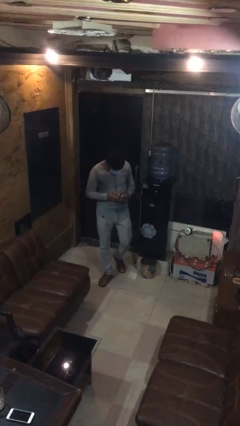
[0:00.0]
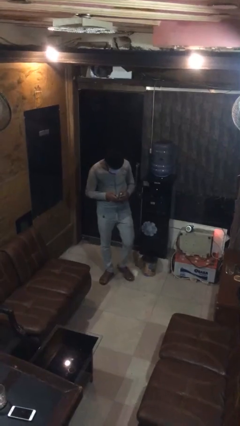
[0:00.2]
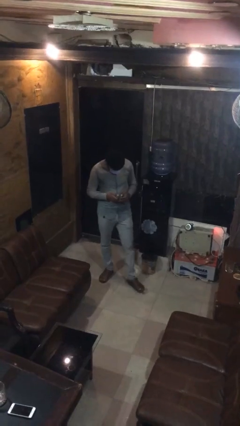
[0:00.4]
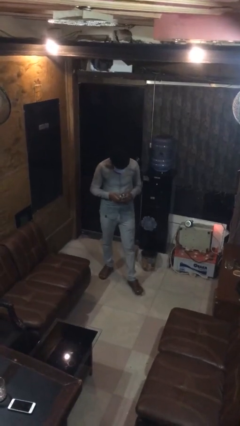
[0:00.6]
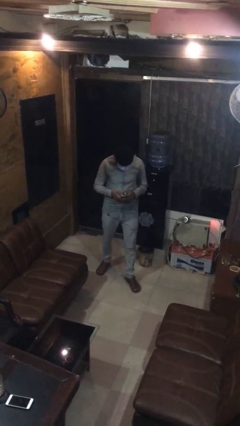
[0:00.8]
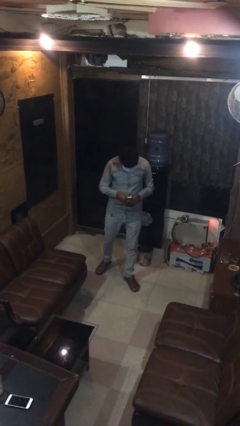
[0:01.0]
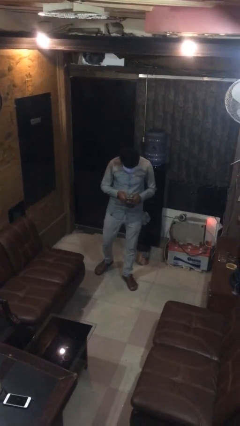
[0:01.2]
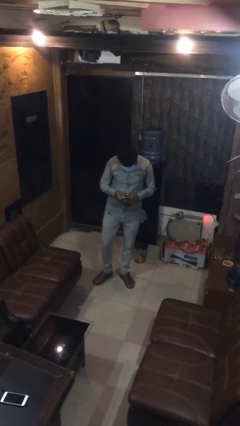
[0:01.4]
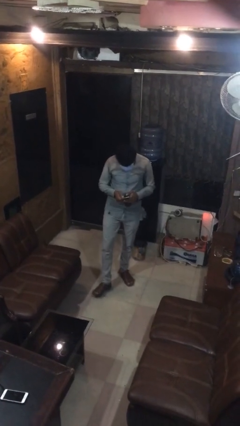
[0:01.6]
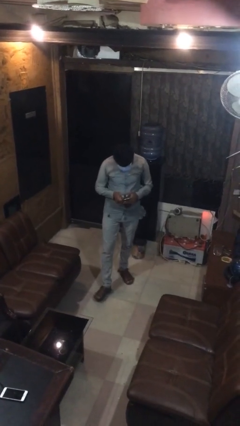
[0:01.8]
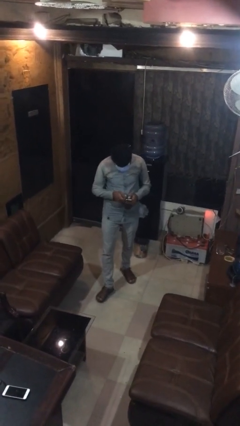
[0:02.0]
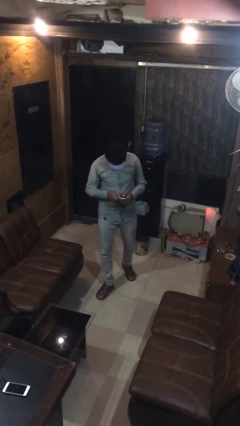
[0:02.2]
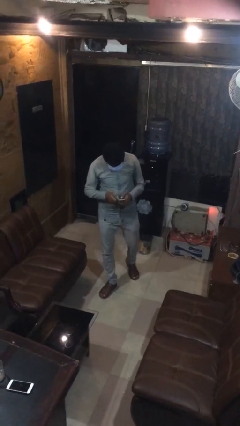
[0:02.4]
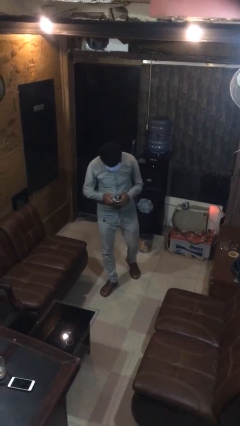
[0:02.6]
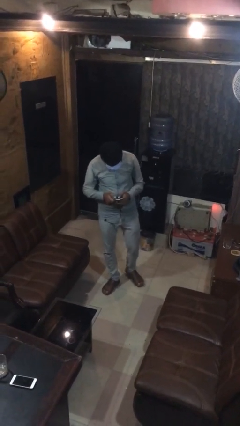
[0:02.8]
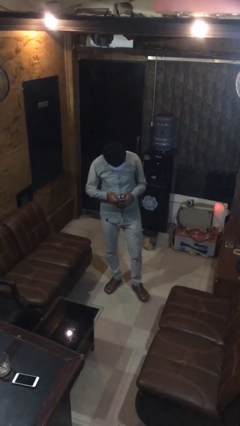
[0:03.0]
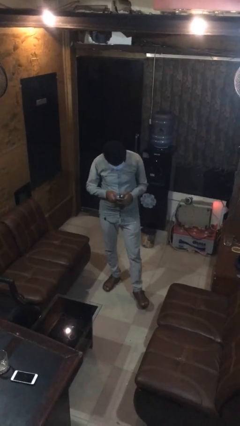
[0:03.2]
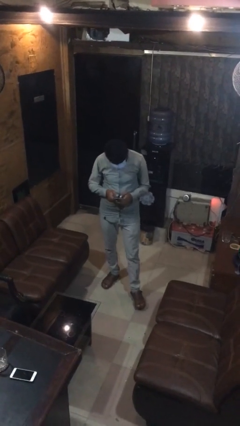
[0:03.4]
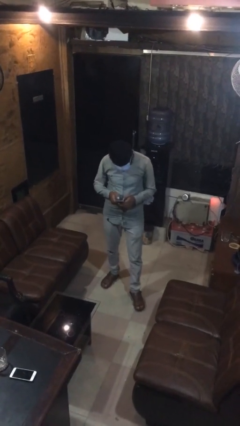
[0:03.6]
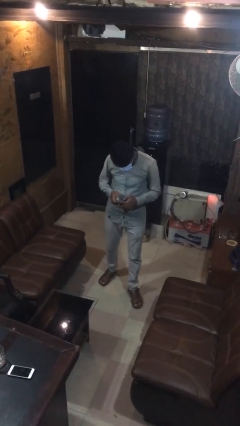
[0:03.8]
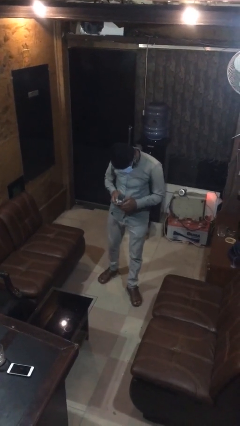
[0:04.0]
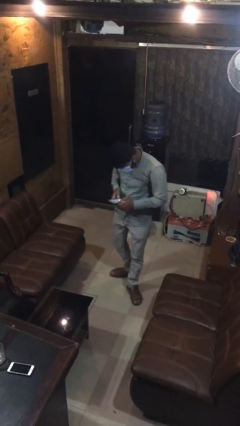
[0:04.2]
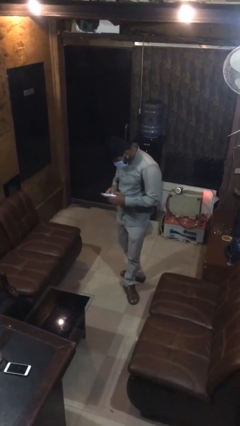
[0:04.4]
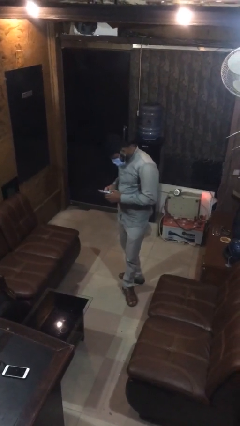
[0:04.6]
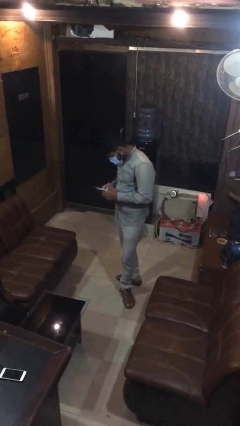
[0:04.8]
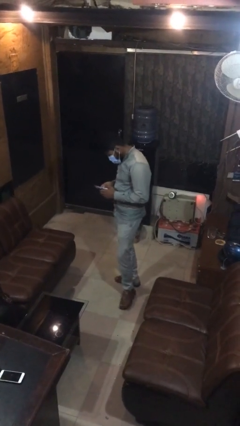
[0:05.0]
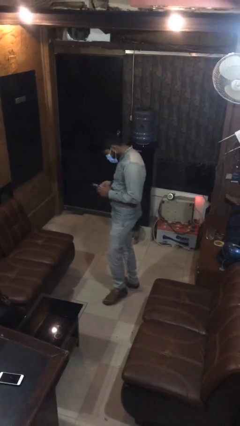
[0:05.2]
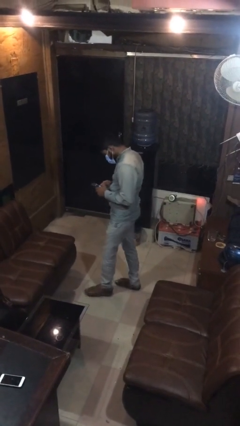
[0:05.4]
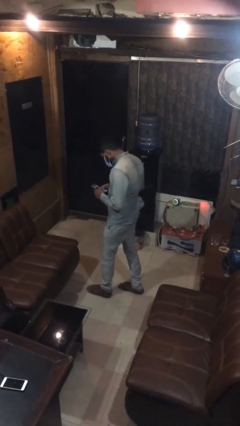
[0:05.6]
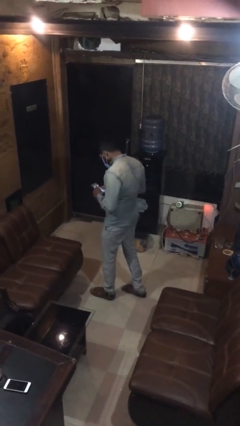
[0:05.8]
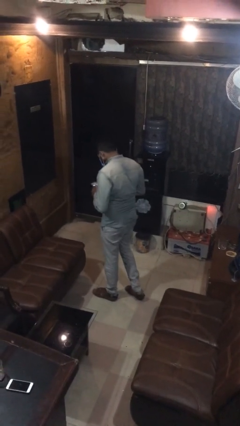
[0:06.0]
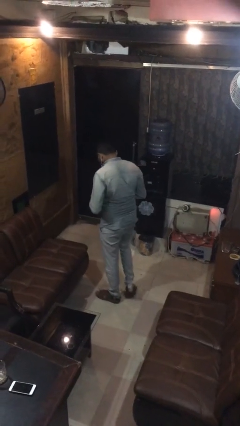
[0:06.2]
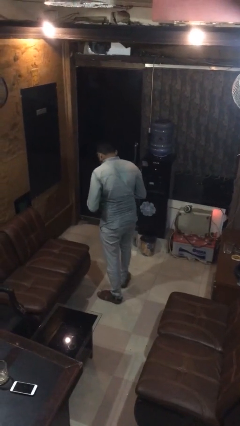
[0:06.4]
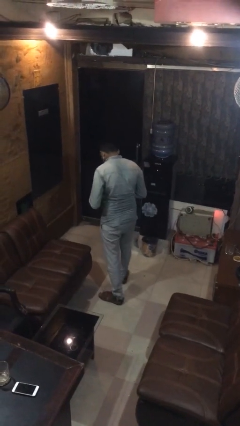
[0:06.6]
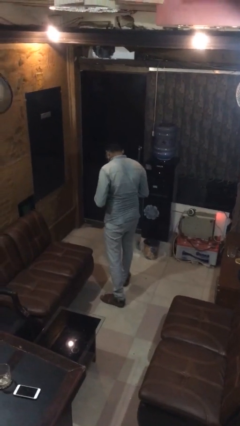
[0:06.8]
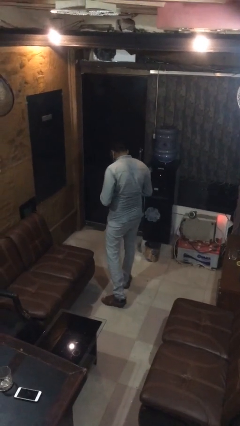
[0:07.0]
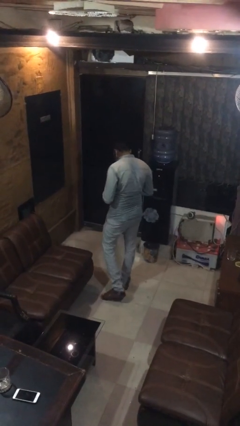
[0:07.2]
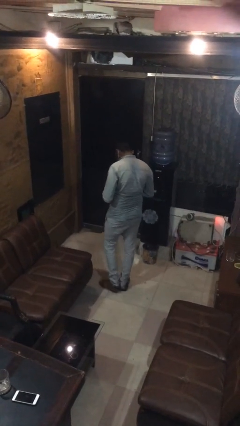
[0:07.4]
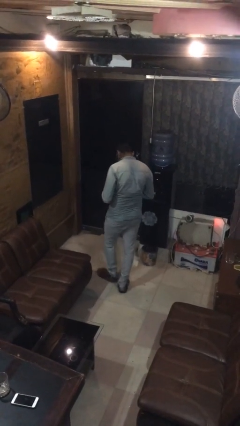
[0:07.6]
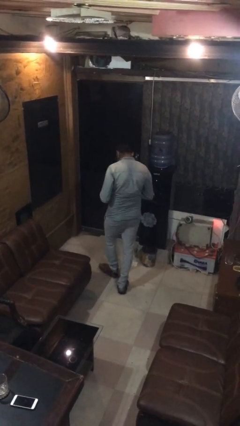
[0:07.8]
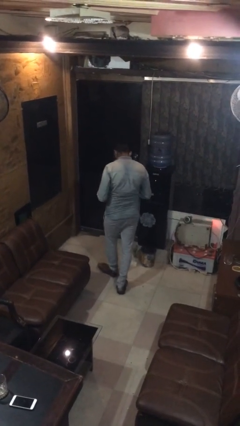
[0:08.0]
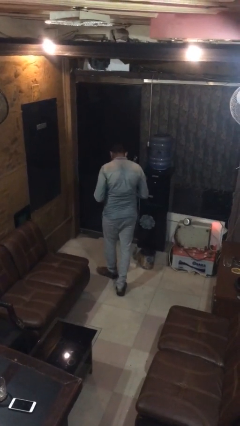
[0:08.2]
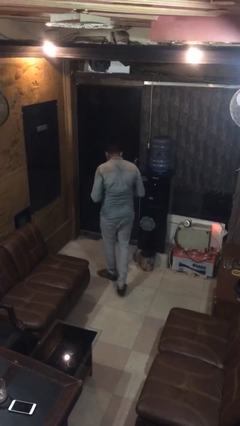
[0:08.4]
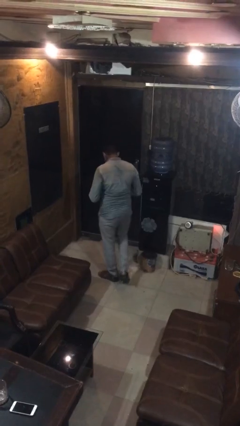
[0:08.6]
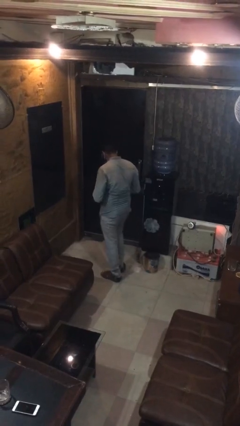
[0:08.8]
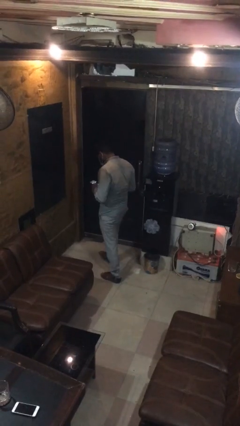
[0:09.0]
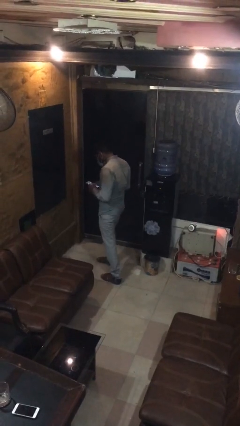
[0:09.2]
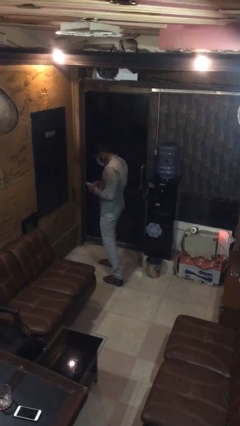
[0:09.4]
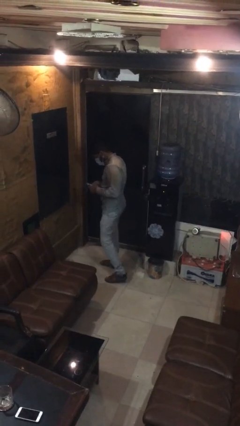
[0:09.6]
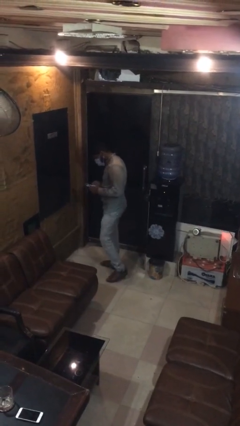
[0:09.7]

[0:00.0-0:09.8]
person texts on phone

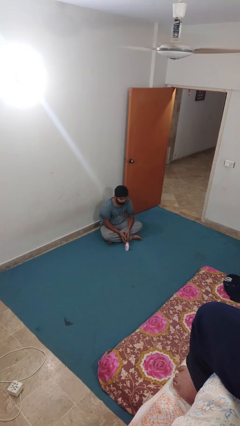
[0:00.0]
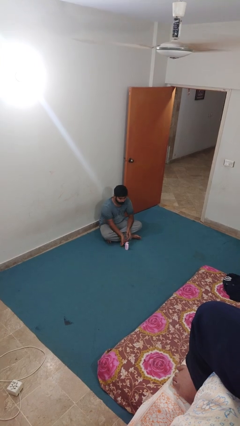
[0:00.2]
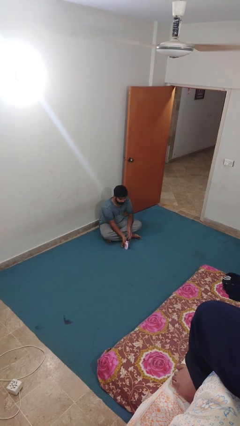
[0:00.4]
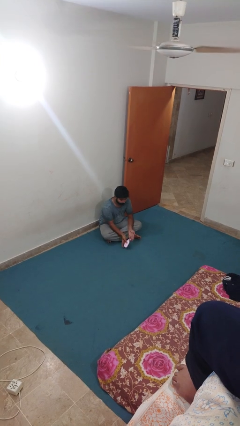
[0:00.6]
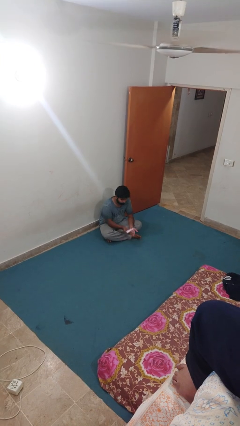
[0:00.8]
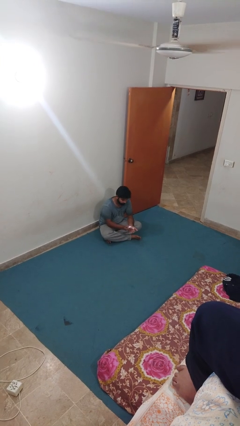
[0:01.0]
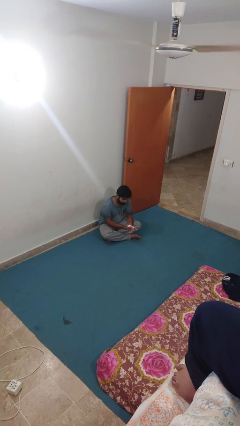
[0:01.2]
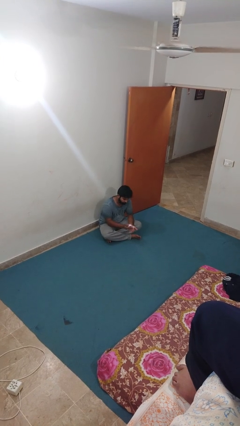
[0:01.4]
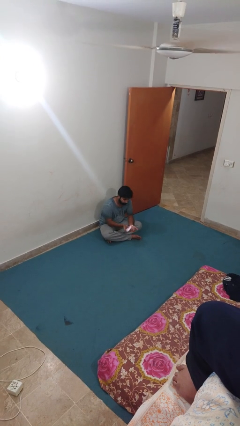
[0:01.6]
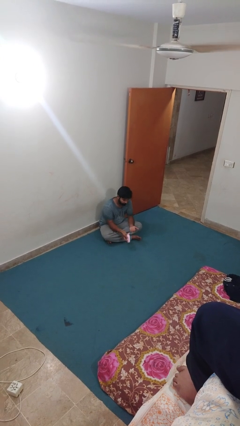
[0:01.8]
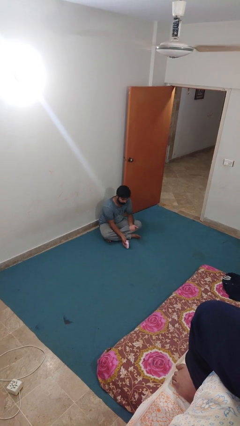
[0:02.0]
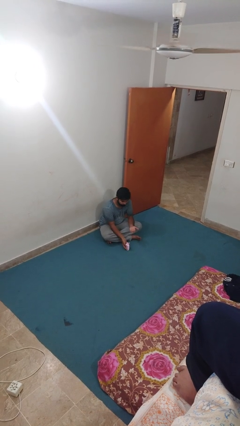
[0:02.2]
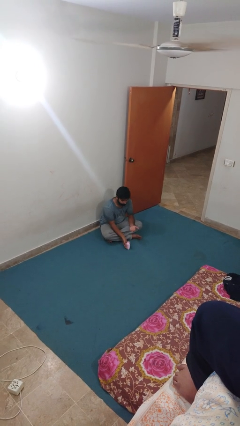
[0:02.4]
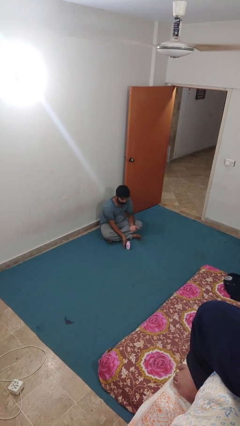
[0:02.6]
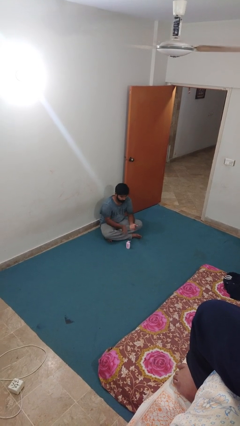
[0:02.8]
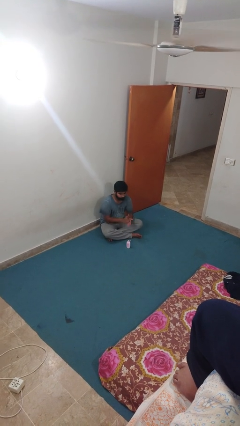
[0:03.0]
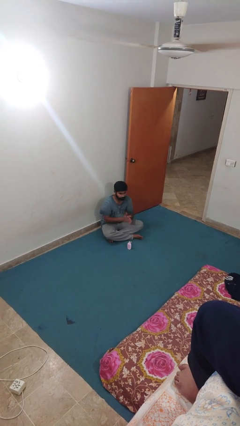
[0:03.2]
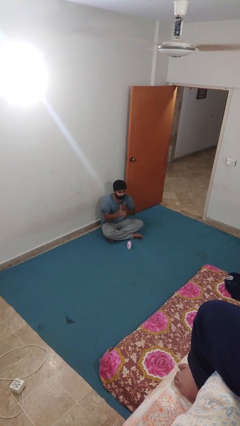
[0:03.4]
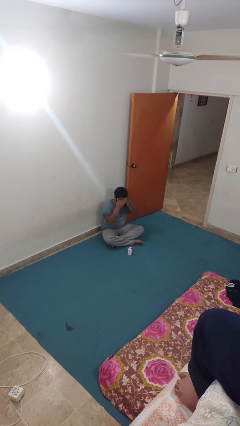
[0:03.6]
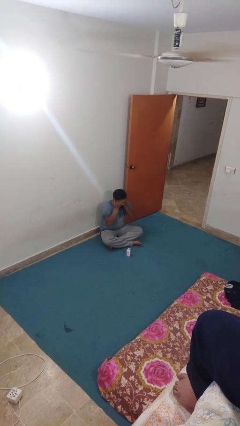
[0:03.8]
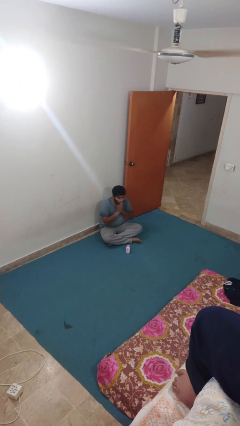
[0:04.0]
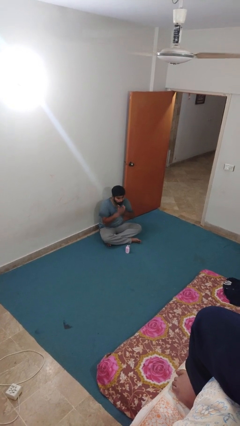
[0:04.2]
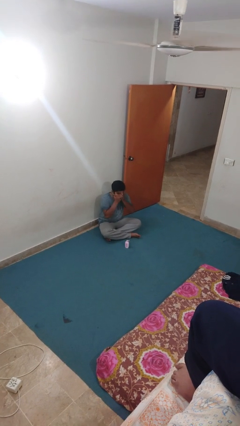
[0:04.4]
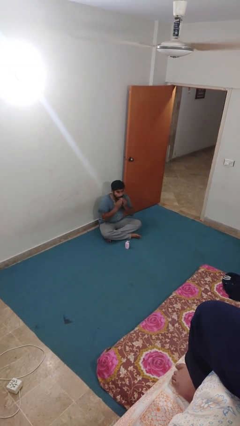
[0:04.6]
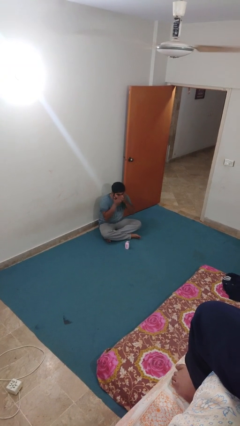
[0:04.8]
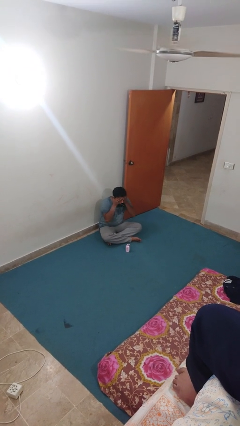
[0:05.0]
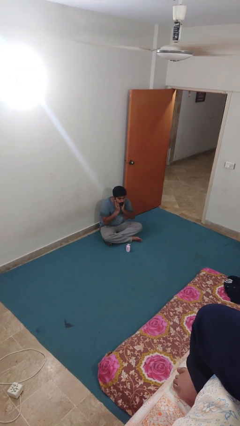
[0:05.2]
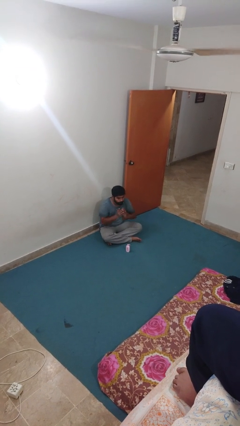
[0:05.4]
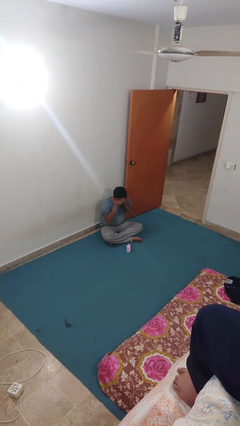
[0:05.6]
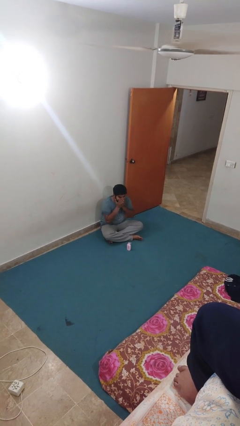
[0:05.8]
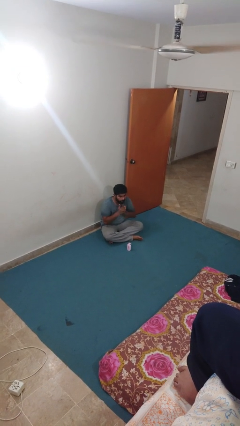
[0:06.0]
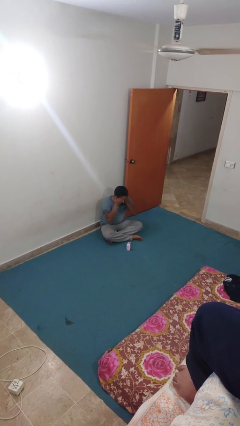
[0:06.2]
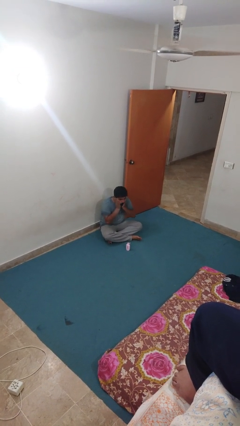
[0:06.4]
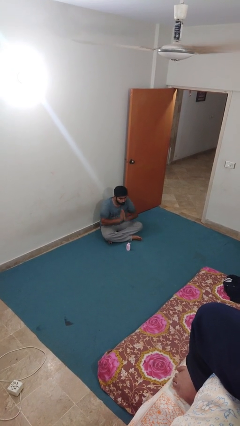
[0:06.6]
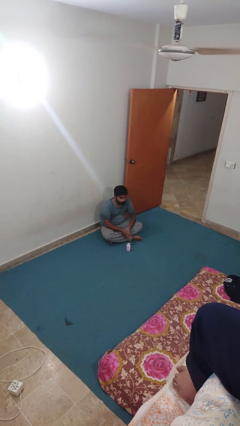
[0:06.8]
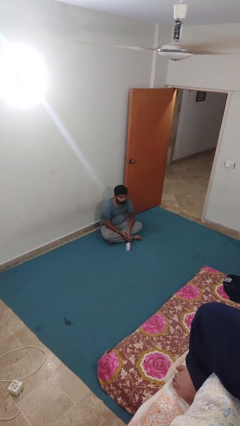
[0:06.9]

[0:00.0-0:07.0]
person applies facial moisturizer

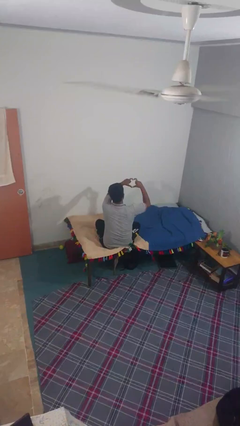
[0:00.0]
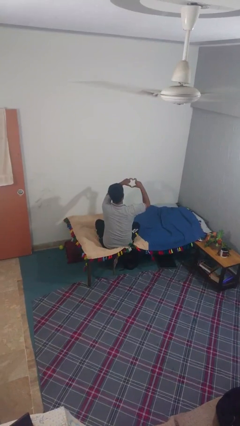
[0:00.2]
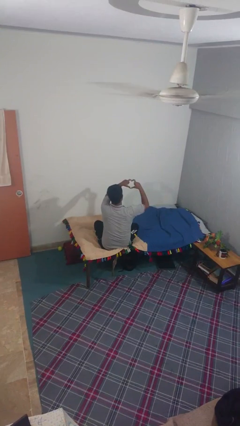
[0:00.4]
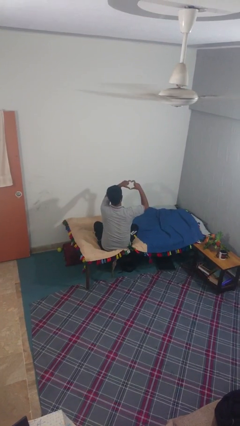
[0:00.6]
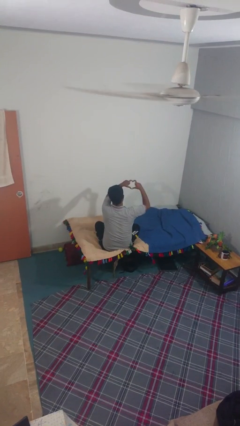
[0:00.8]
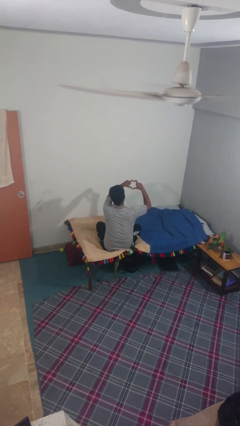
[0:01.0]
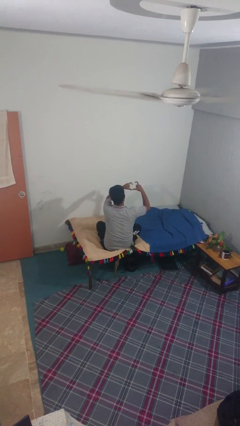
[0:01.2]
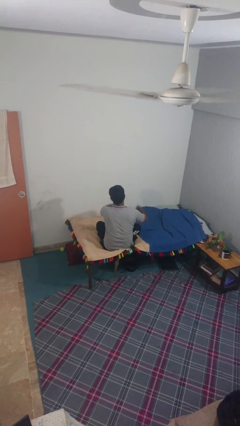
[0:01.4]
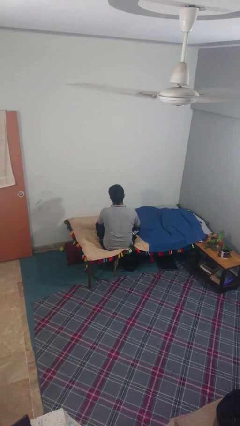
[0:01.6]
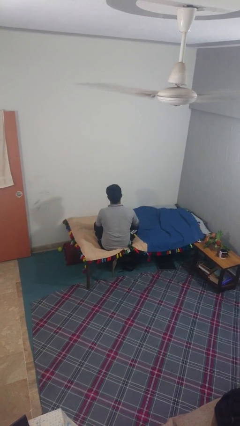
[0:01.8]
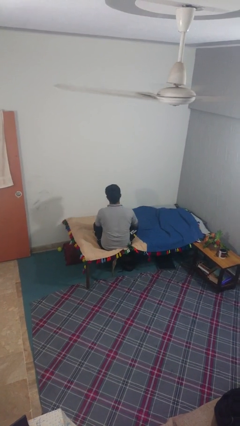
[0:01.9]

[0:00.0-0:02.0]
person gestures heart
